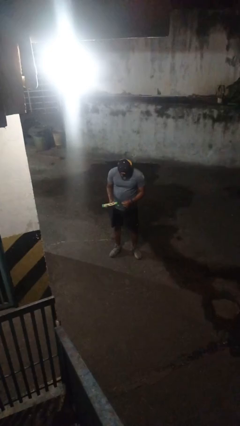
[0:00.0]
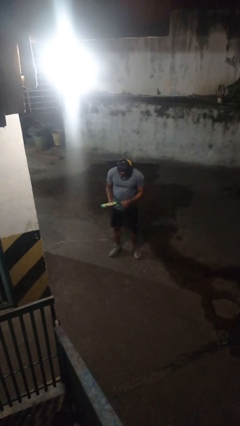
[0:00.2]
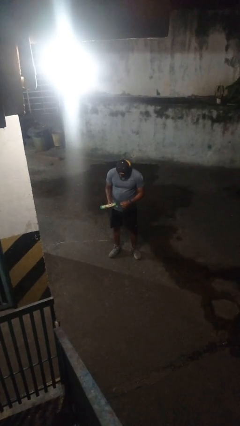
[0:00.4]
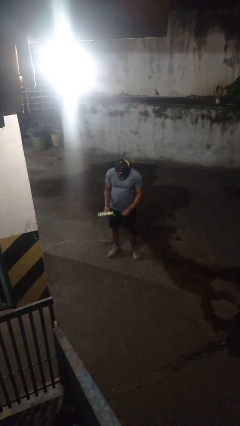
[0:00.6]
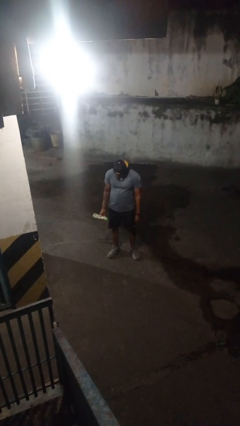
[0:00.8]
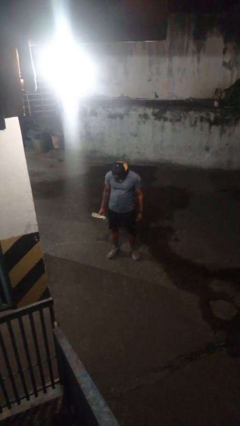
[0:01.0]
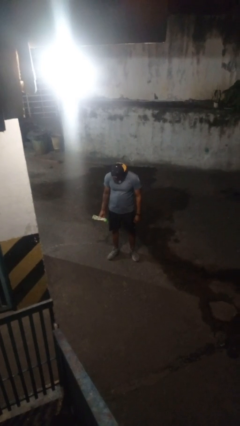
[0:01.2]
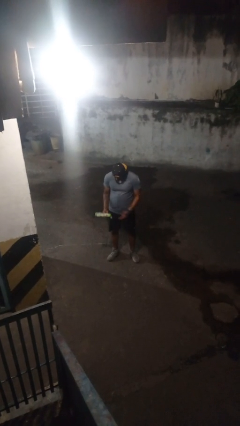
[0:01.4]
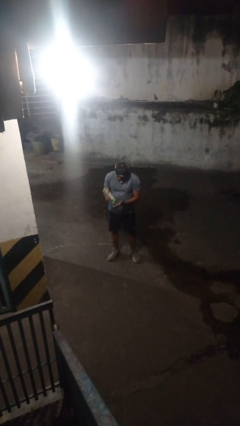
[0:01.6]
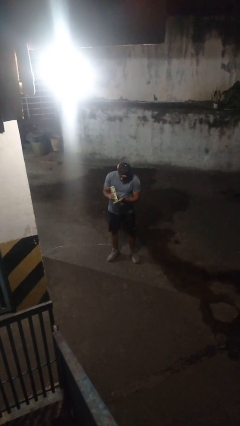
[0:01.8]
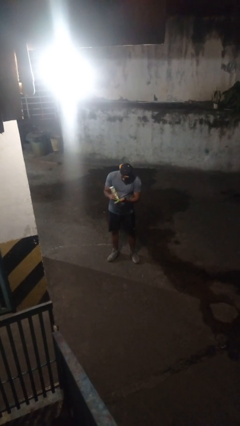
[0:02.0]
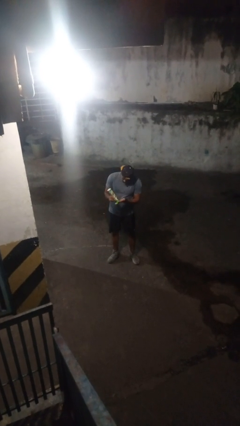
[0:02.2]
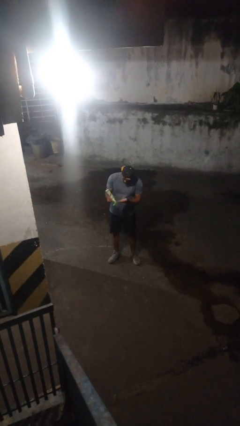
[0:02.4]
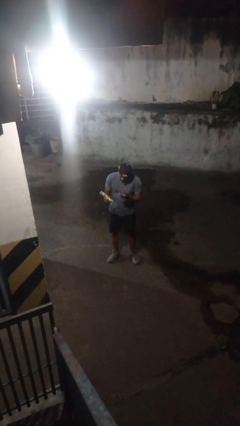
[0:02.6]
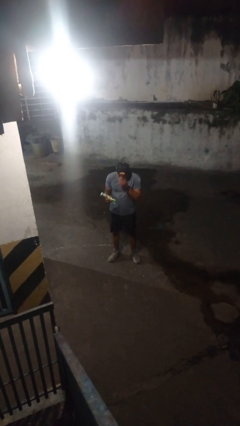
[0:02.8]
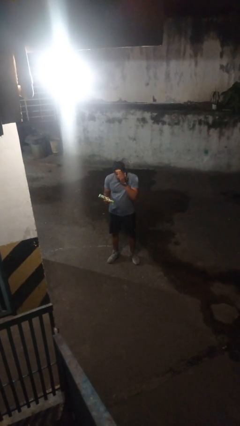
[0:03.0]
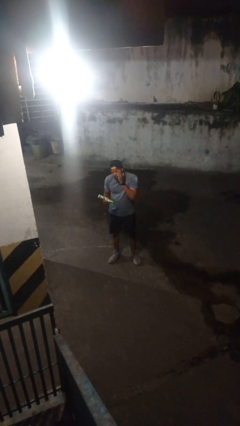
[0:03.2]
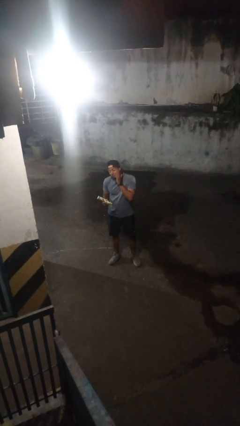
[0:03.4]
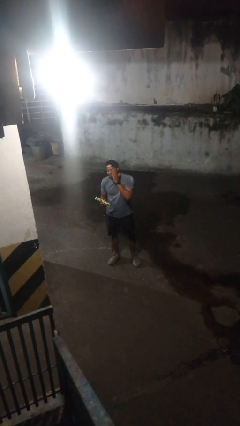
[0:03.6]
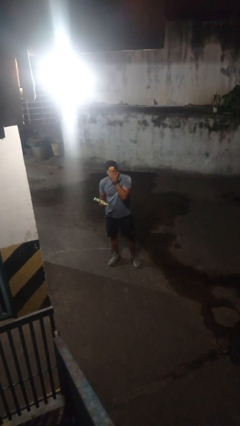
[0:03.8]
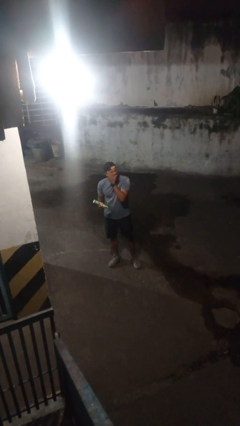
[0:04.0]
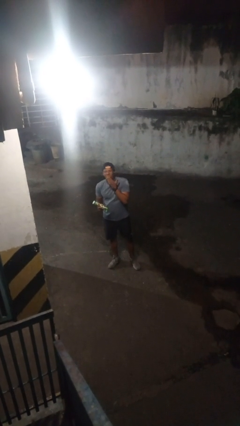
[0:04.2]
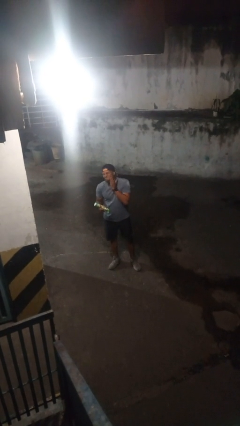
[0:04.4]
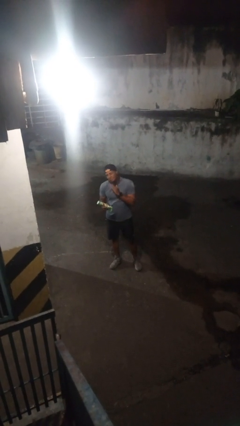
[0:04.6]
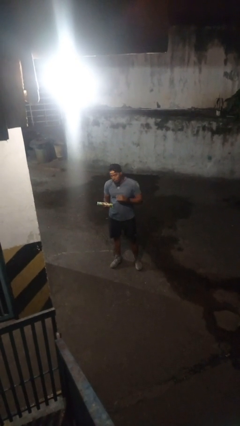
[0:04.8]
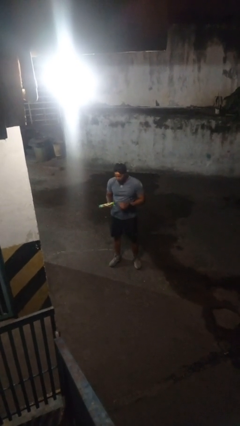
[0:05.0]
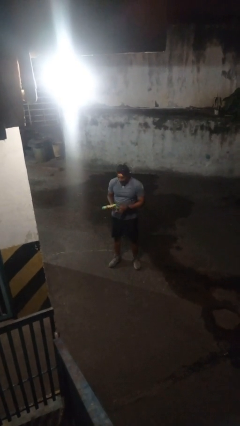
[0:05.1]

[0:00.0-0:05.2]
person applies facial moisturizer

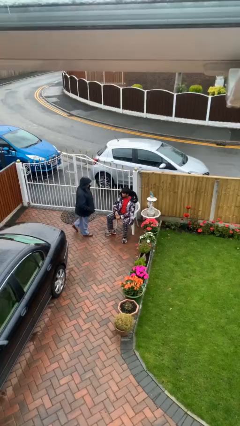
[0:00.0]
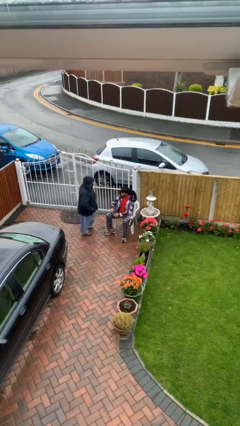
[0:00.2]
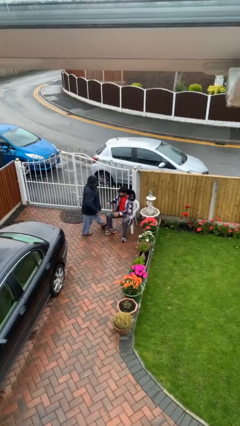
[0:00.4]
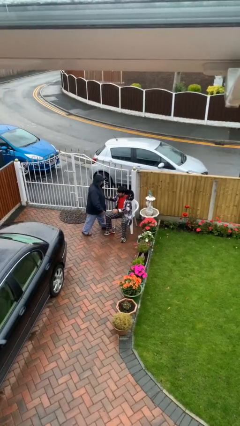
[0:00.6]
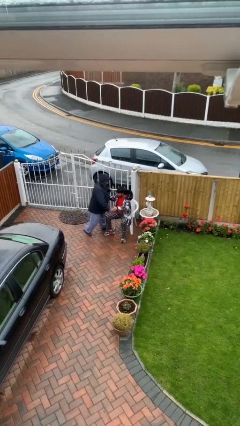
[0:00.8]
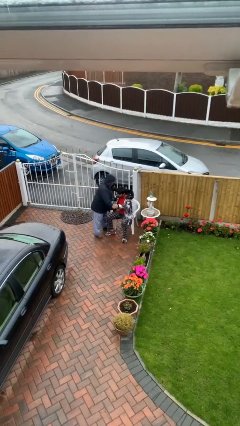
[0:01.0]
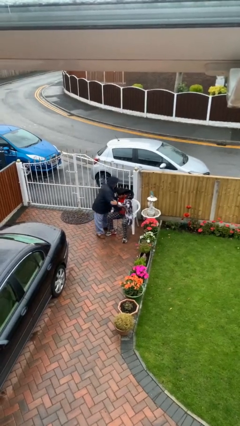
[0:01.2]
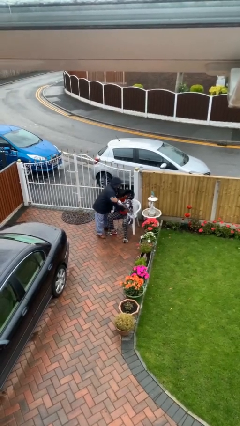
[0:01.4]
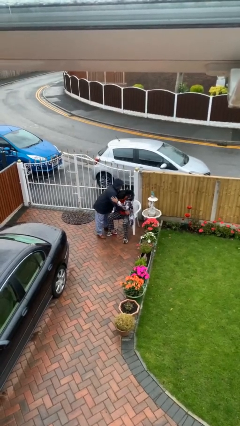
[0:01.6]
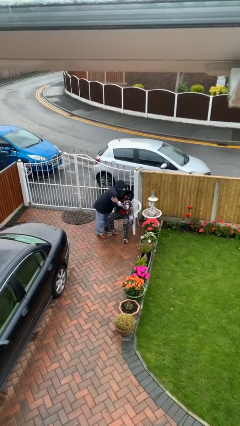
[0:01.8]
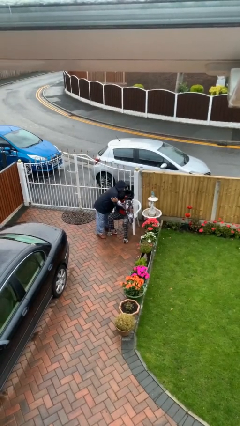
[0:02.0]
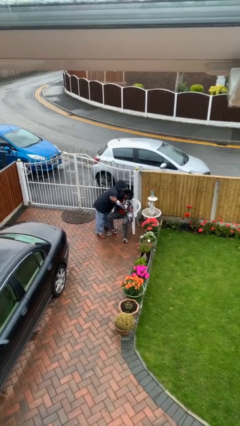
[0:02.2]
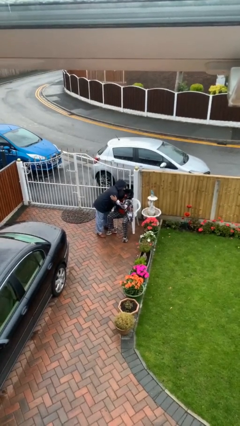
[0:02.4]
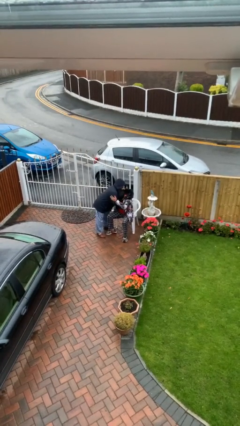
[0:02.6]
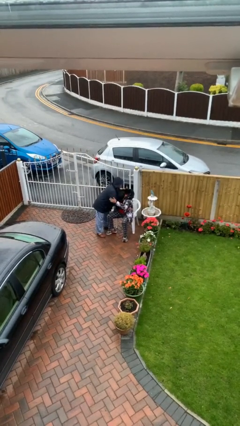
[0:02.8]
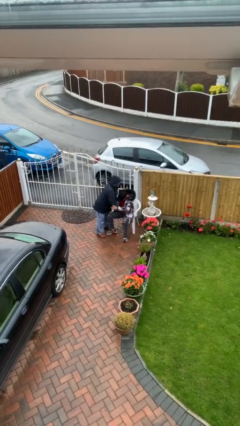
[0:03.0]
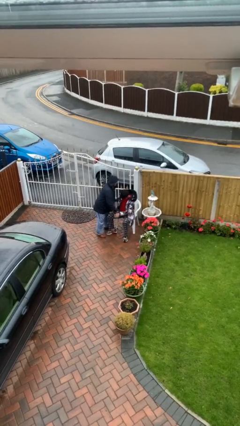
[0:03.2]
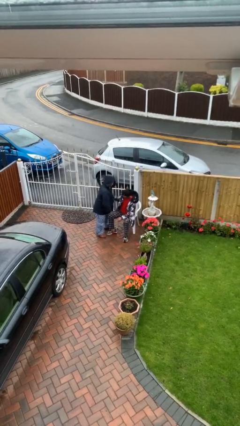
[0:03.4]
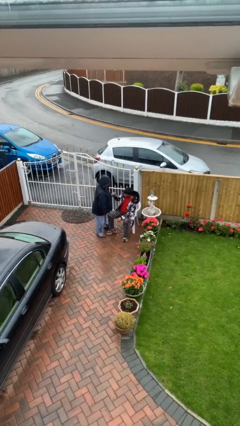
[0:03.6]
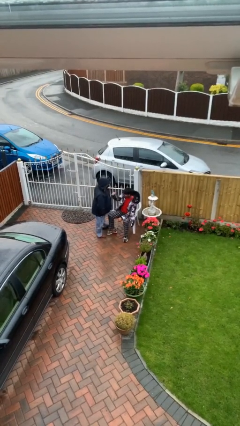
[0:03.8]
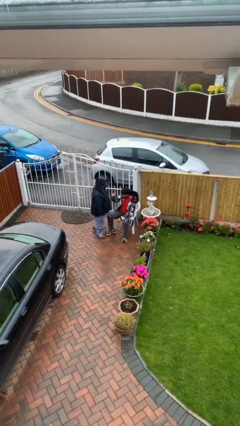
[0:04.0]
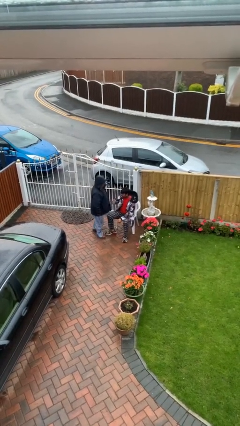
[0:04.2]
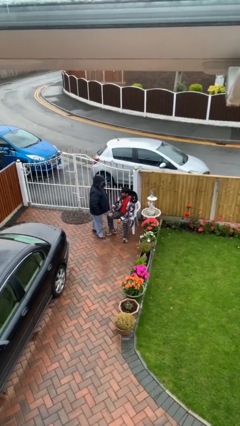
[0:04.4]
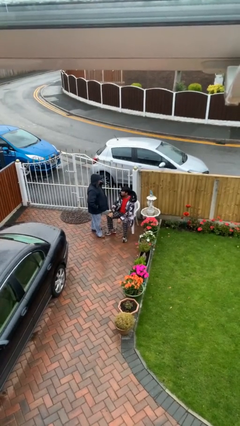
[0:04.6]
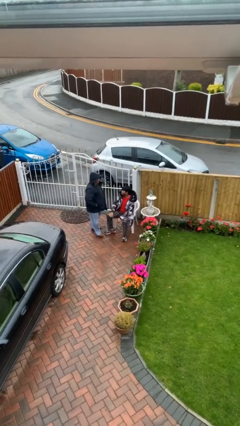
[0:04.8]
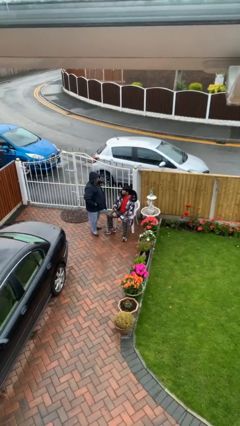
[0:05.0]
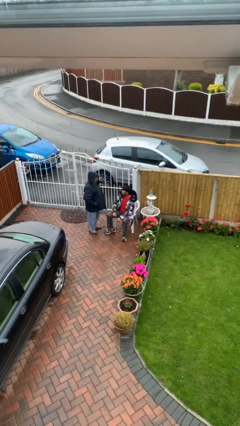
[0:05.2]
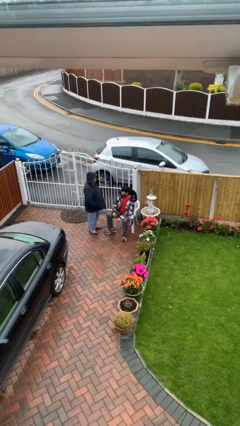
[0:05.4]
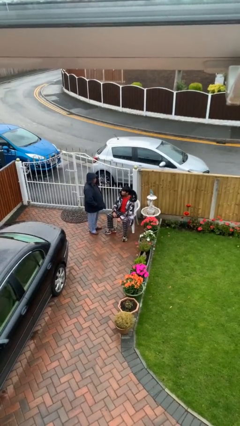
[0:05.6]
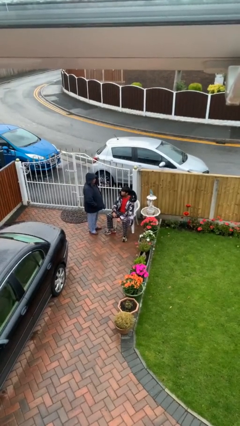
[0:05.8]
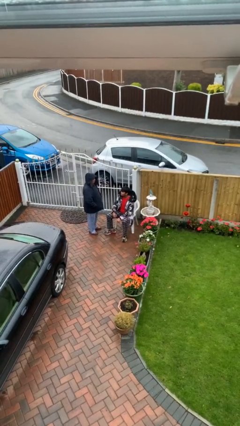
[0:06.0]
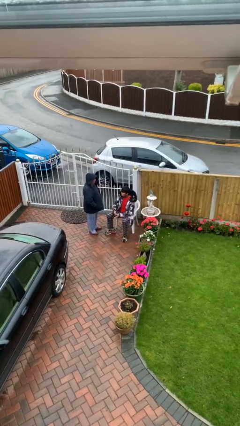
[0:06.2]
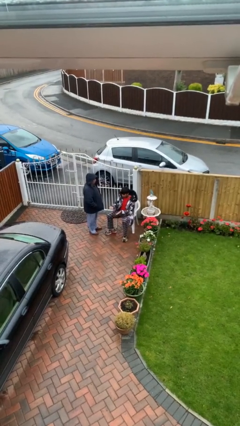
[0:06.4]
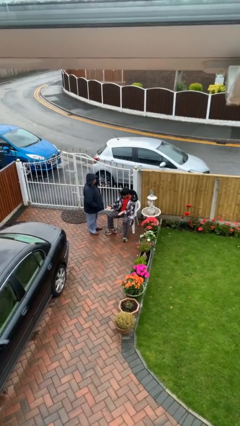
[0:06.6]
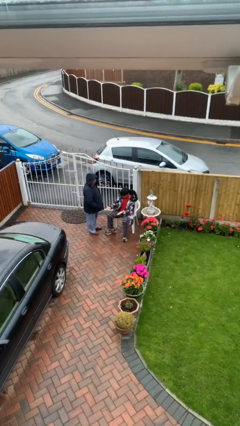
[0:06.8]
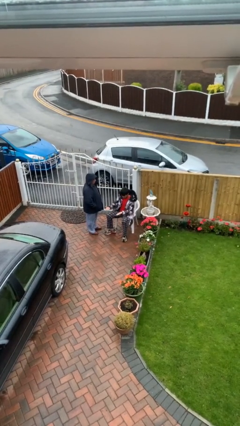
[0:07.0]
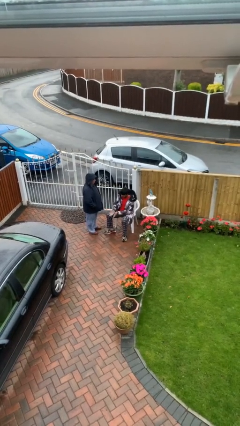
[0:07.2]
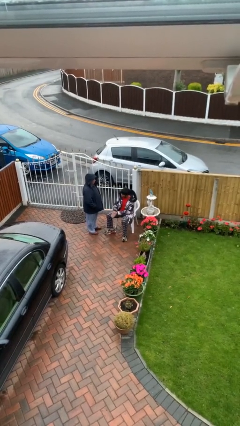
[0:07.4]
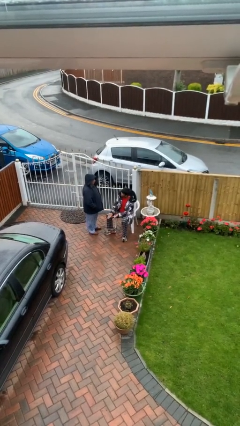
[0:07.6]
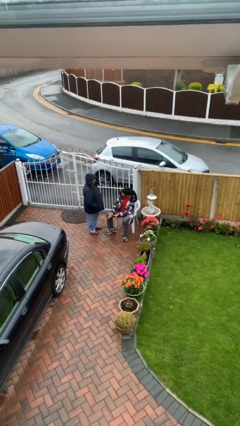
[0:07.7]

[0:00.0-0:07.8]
person embraces person

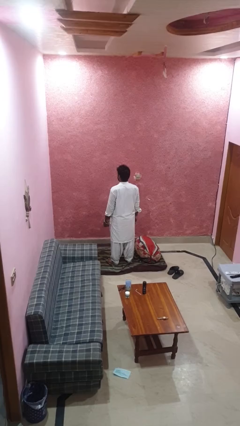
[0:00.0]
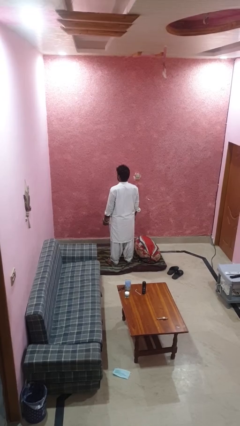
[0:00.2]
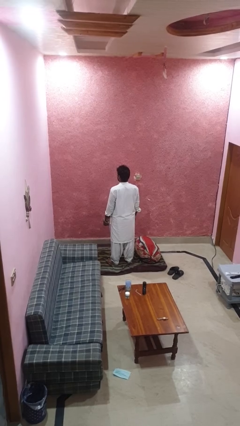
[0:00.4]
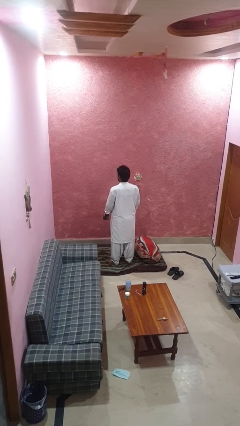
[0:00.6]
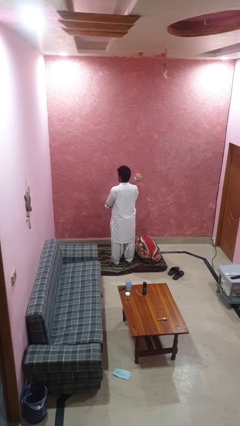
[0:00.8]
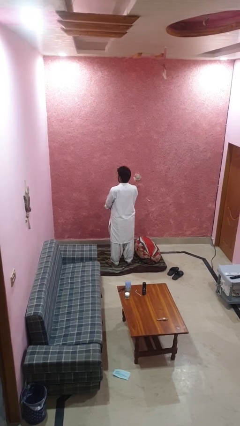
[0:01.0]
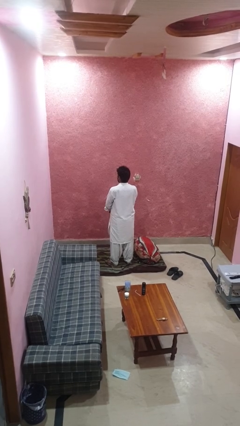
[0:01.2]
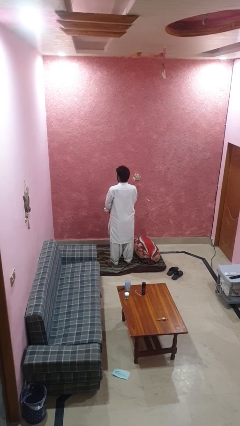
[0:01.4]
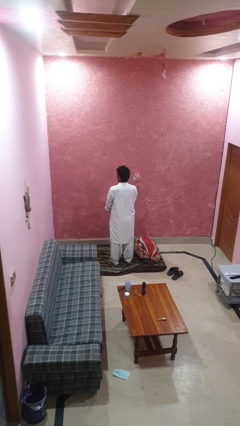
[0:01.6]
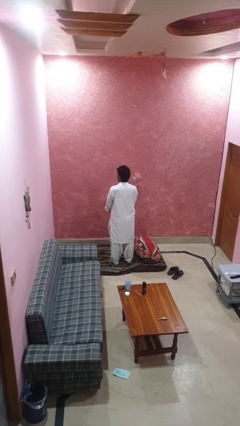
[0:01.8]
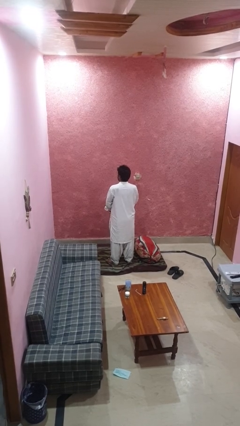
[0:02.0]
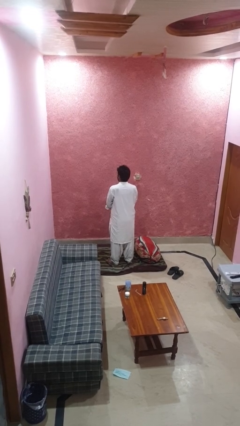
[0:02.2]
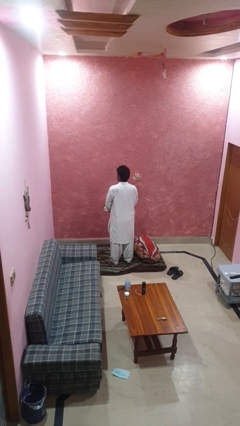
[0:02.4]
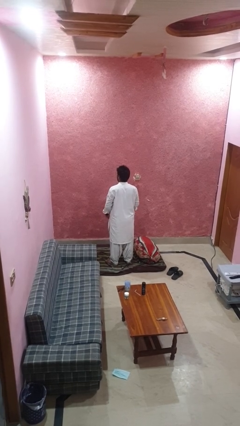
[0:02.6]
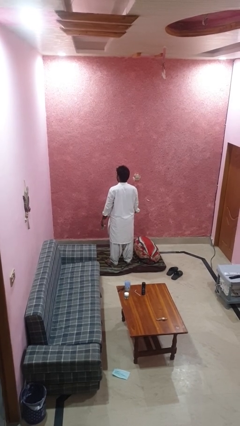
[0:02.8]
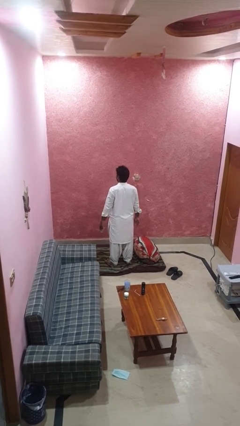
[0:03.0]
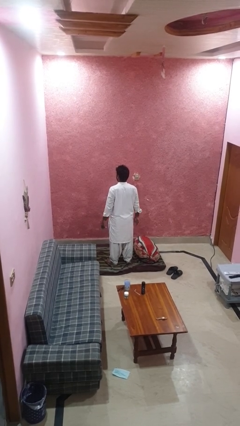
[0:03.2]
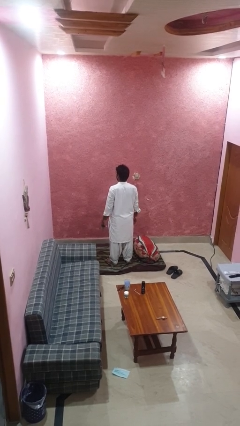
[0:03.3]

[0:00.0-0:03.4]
person takes off wristwatch

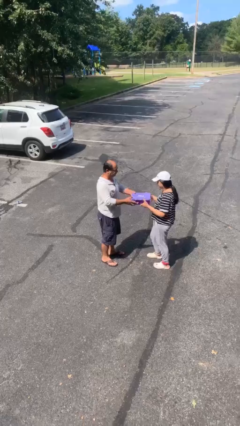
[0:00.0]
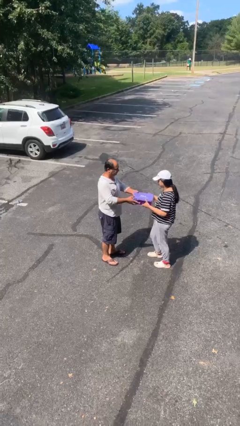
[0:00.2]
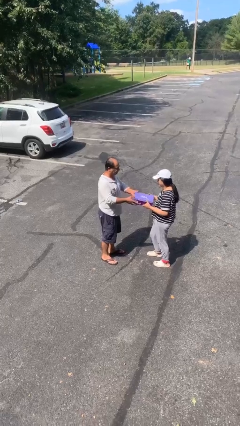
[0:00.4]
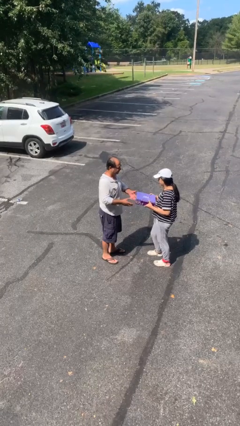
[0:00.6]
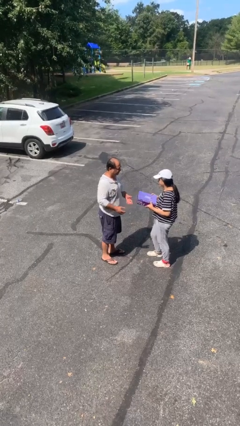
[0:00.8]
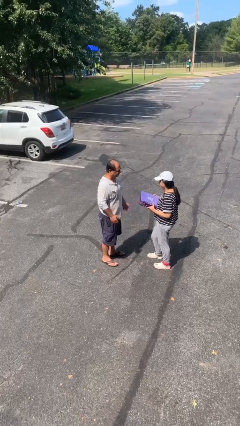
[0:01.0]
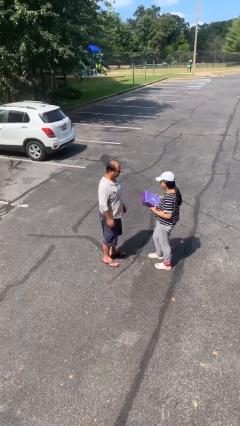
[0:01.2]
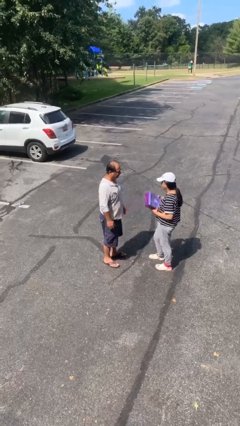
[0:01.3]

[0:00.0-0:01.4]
person transfers object to person

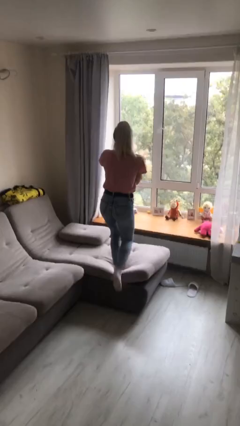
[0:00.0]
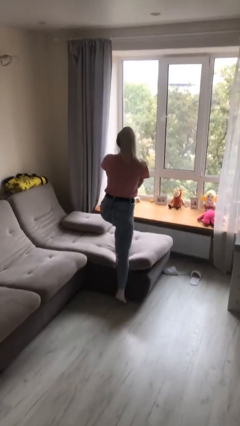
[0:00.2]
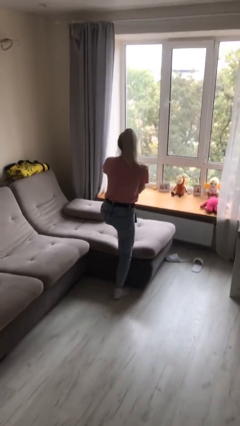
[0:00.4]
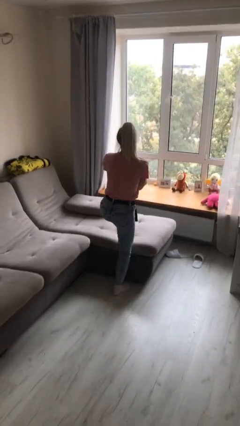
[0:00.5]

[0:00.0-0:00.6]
person climbs off couch
